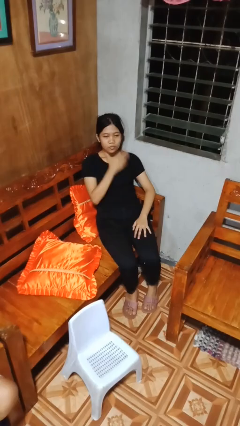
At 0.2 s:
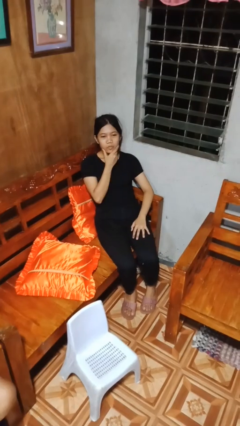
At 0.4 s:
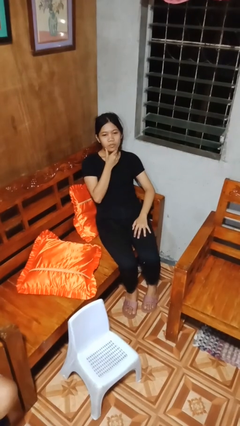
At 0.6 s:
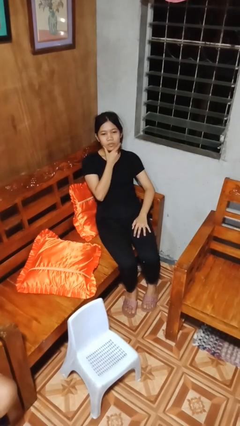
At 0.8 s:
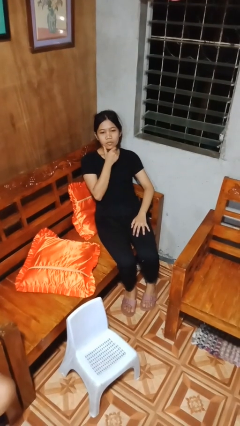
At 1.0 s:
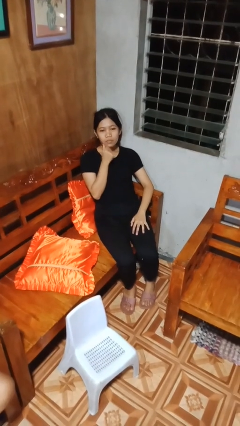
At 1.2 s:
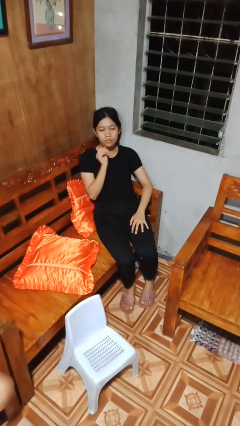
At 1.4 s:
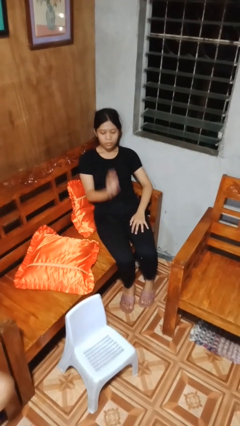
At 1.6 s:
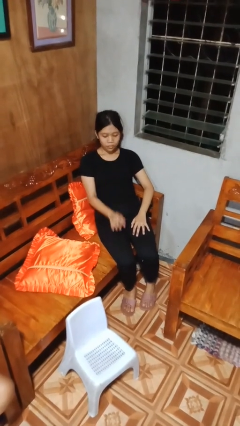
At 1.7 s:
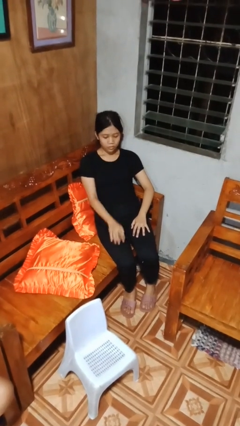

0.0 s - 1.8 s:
person strokes chin

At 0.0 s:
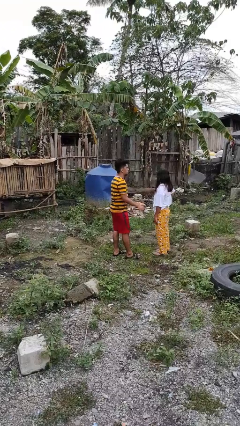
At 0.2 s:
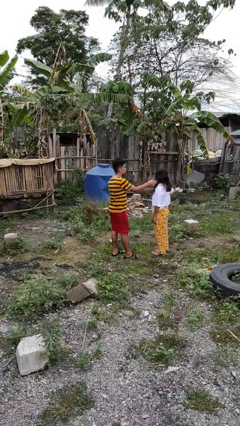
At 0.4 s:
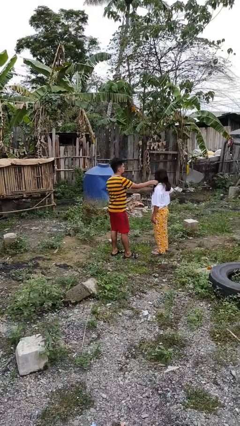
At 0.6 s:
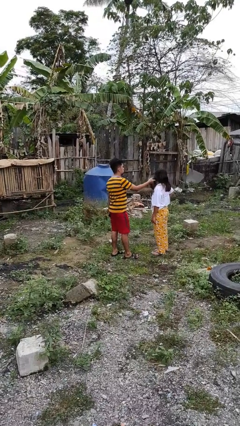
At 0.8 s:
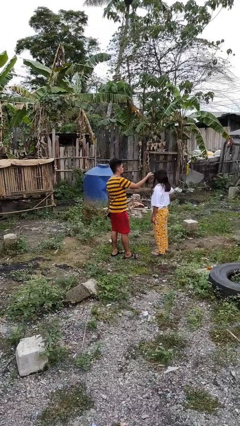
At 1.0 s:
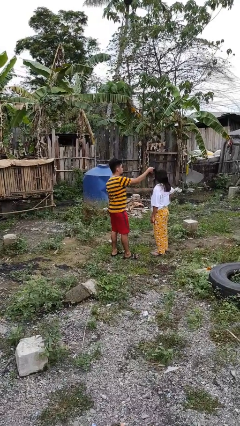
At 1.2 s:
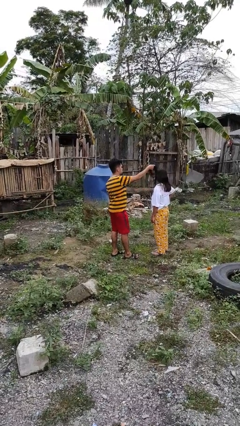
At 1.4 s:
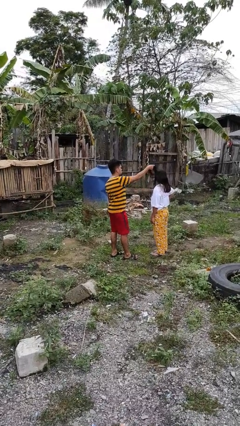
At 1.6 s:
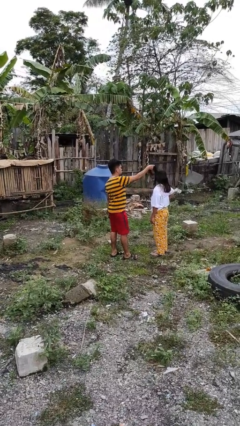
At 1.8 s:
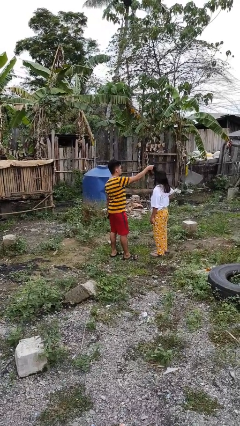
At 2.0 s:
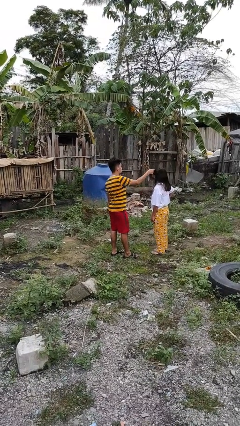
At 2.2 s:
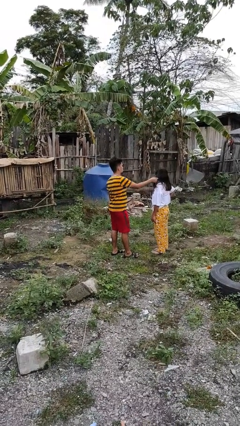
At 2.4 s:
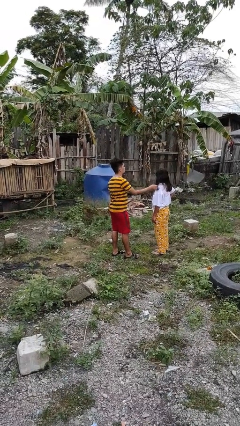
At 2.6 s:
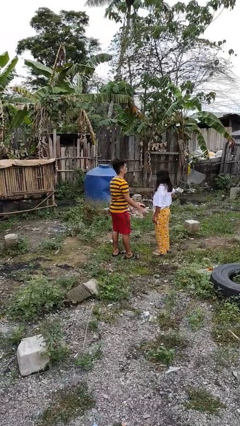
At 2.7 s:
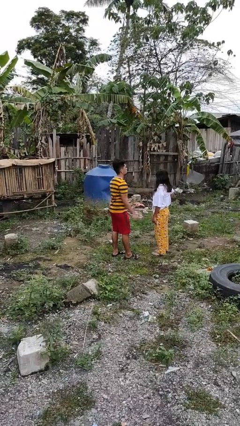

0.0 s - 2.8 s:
person grabs person by hair

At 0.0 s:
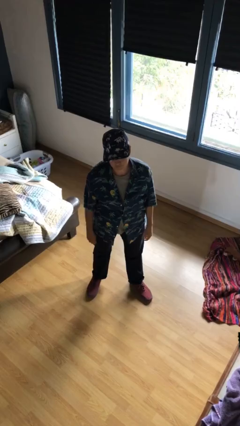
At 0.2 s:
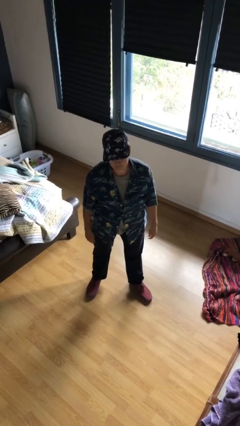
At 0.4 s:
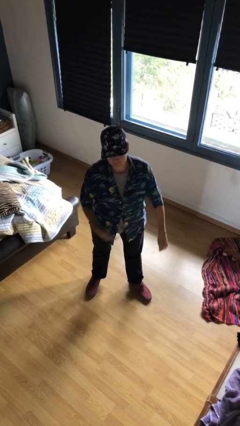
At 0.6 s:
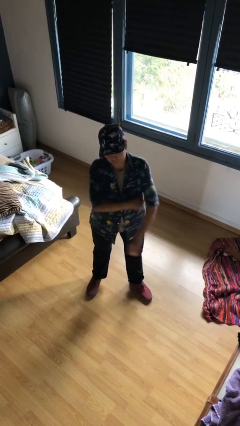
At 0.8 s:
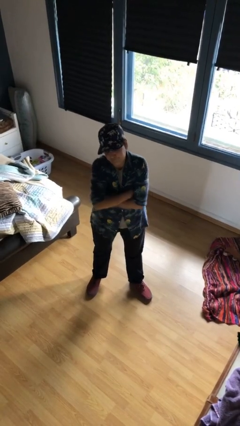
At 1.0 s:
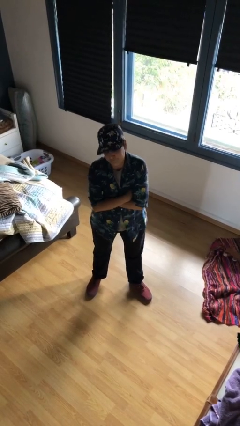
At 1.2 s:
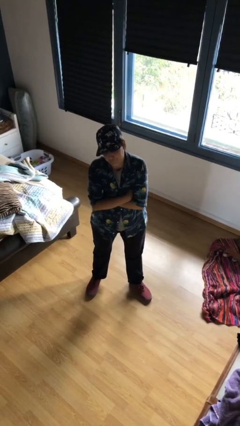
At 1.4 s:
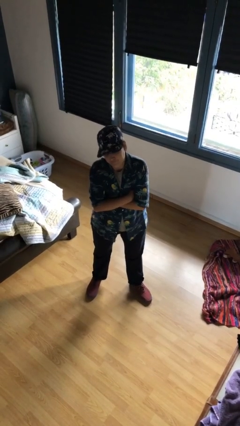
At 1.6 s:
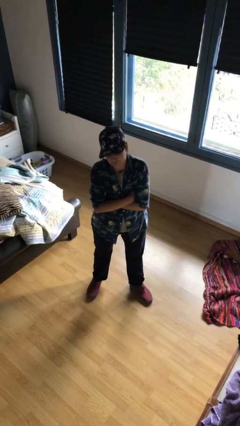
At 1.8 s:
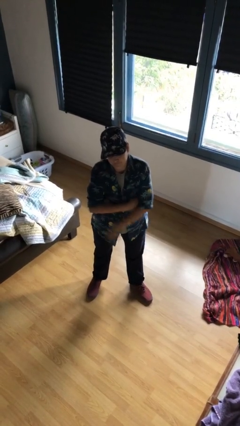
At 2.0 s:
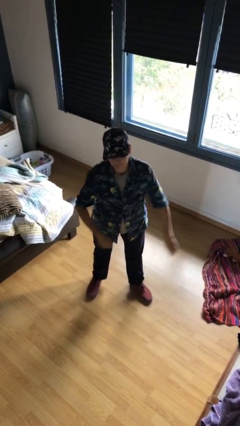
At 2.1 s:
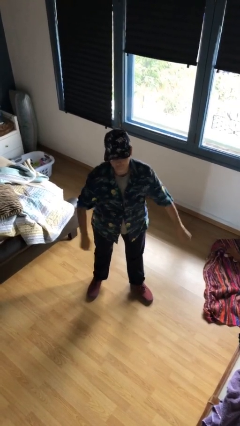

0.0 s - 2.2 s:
person crosses arms

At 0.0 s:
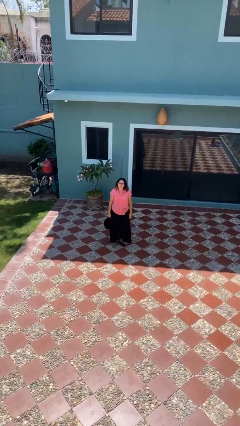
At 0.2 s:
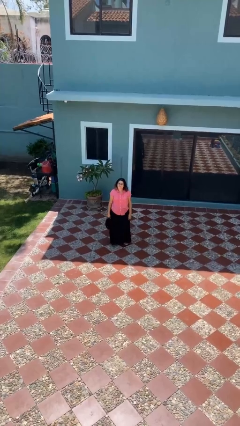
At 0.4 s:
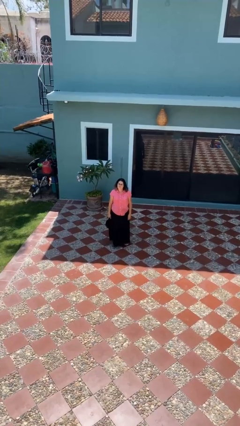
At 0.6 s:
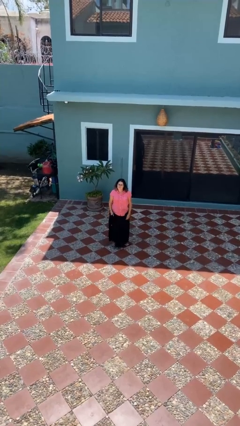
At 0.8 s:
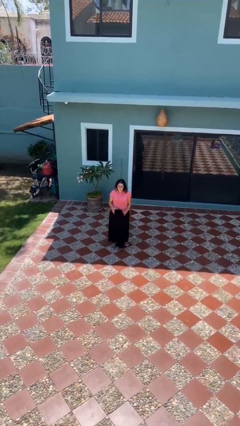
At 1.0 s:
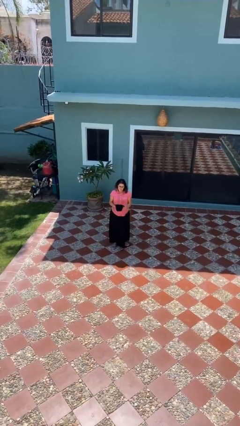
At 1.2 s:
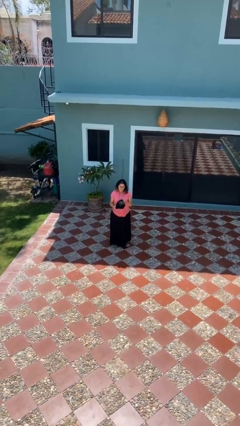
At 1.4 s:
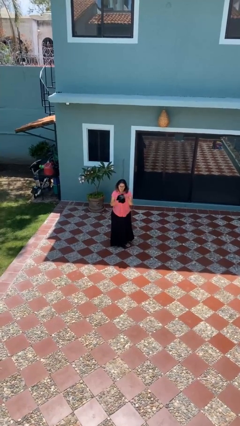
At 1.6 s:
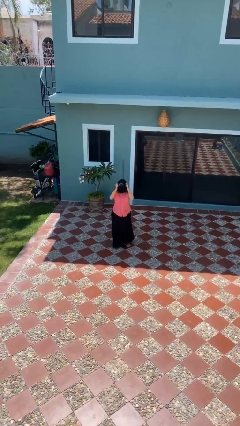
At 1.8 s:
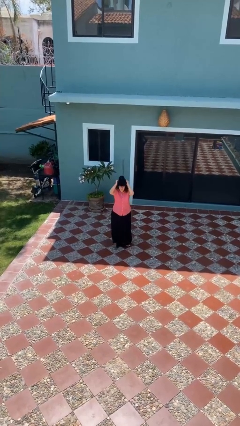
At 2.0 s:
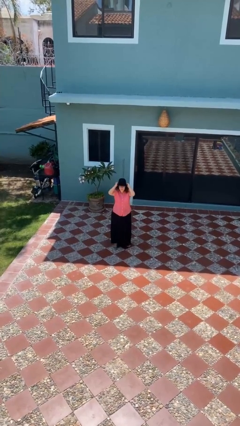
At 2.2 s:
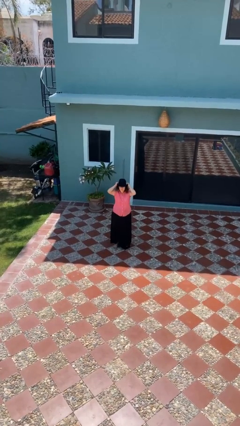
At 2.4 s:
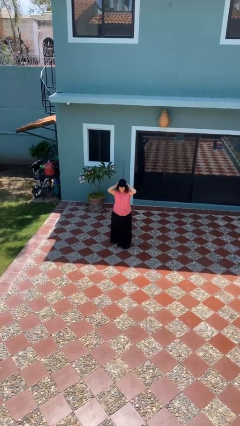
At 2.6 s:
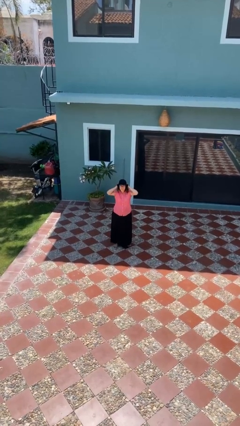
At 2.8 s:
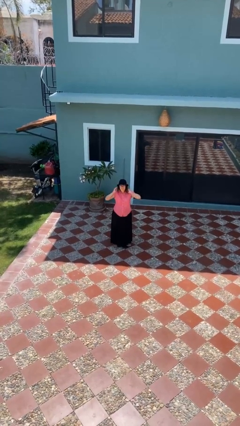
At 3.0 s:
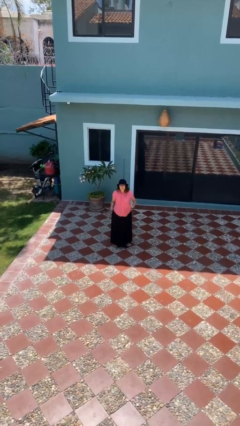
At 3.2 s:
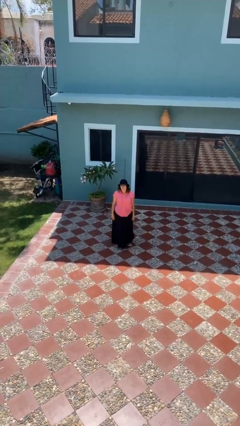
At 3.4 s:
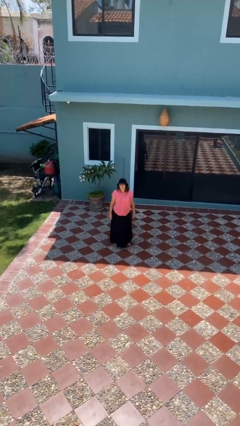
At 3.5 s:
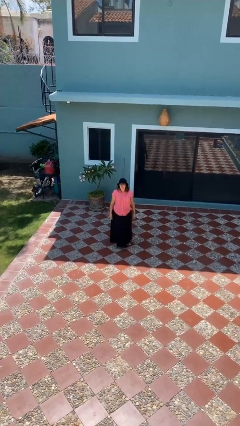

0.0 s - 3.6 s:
person puts on hat

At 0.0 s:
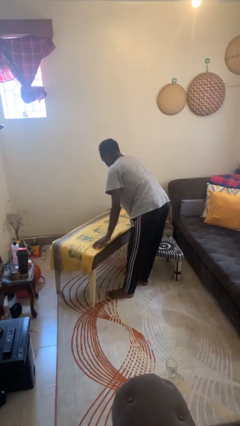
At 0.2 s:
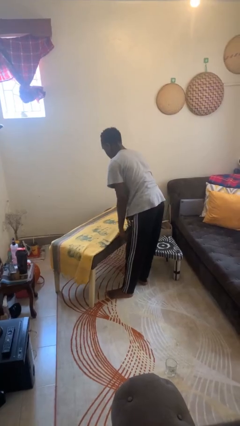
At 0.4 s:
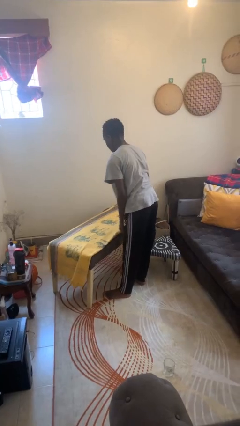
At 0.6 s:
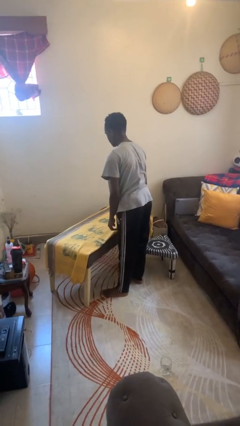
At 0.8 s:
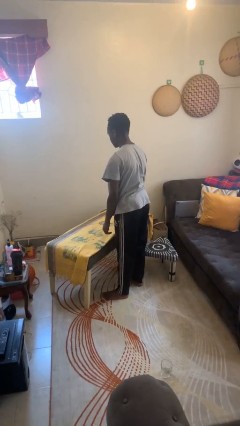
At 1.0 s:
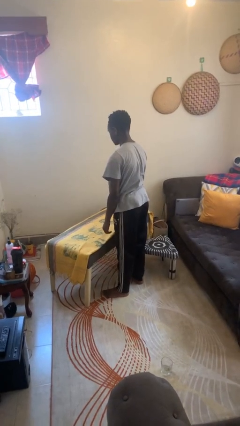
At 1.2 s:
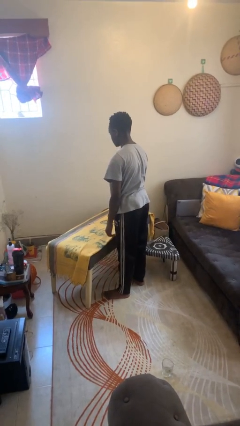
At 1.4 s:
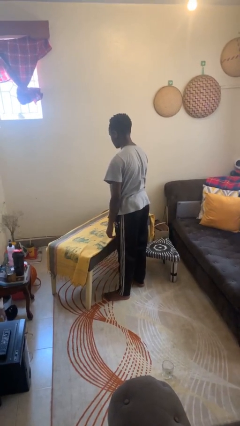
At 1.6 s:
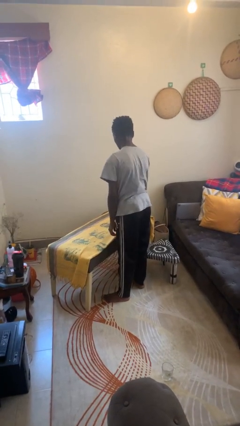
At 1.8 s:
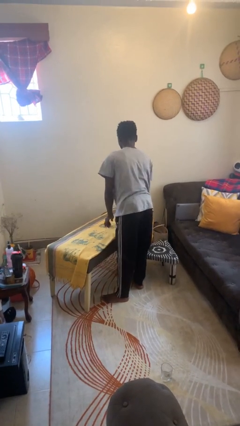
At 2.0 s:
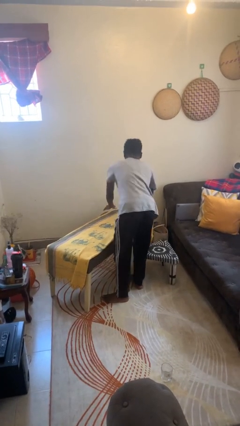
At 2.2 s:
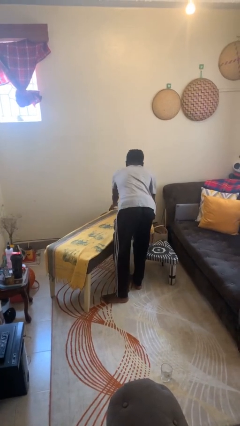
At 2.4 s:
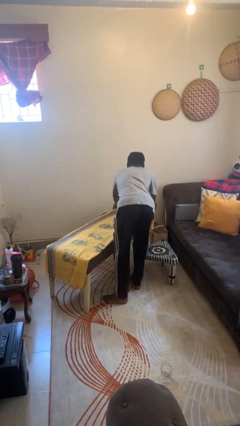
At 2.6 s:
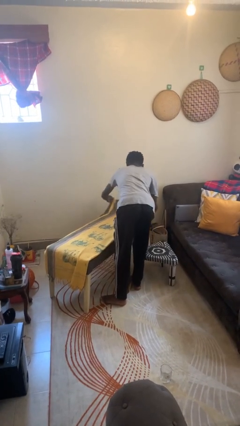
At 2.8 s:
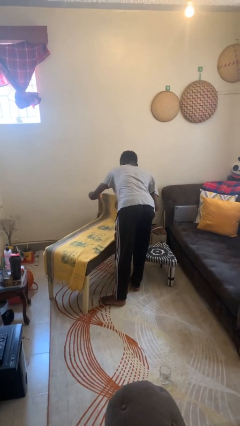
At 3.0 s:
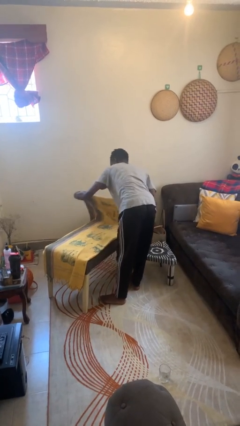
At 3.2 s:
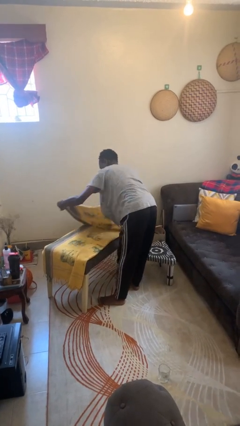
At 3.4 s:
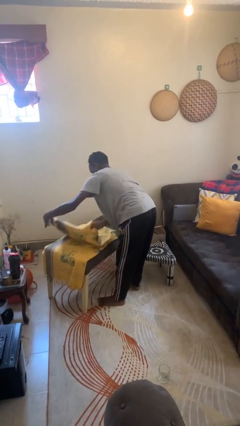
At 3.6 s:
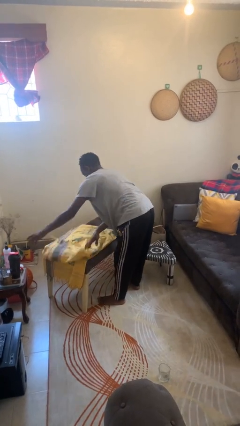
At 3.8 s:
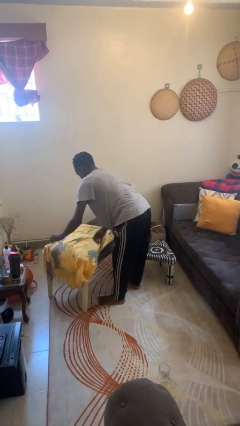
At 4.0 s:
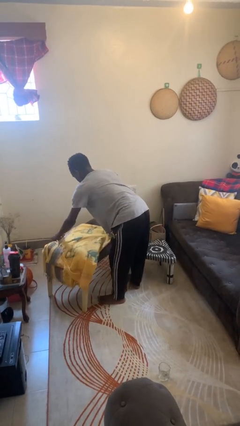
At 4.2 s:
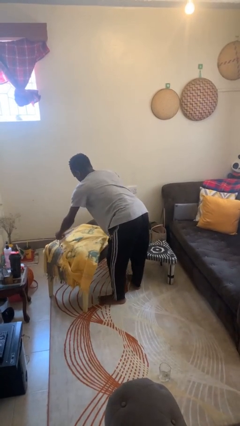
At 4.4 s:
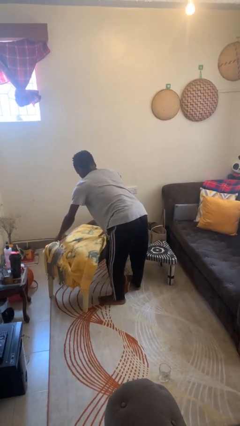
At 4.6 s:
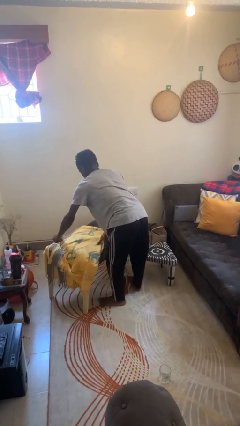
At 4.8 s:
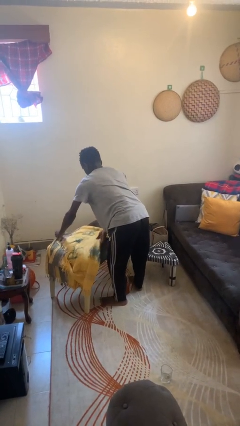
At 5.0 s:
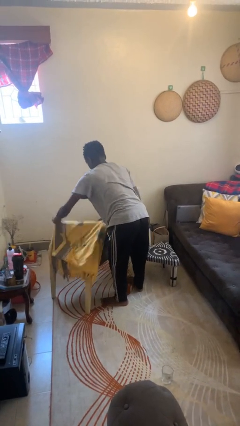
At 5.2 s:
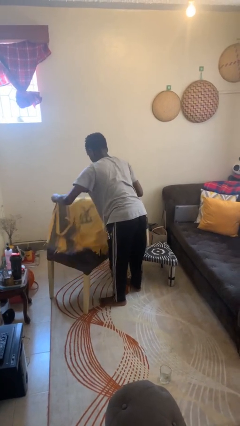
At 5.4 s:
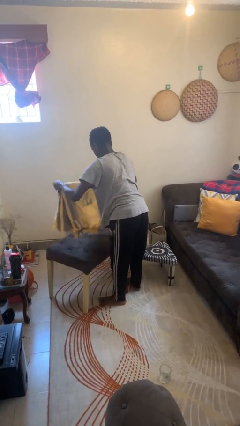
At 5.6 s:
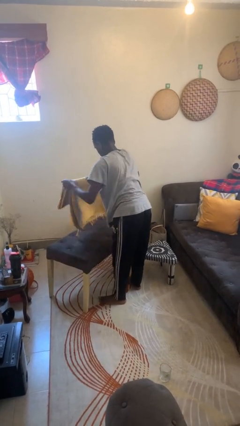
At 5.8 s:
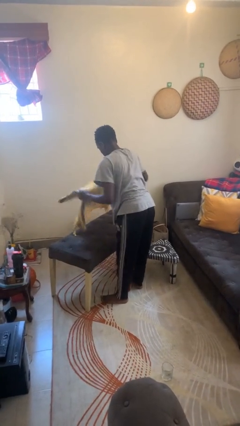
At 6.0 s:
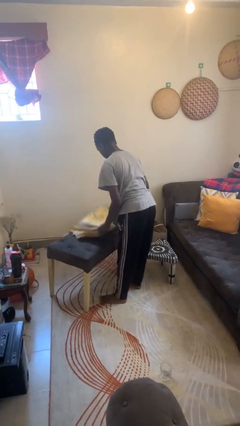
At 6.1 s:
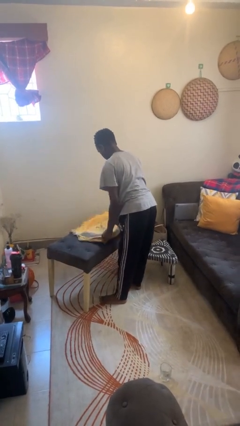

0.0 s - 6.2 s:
person folds tablecloth

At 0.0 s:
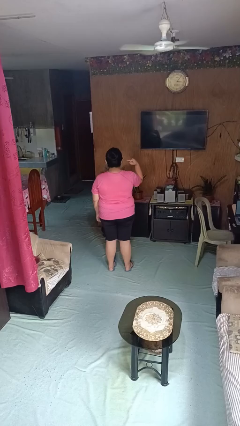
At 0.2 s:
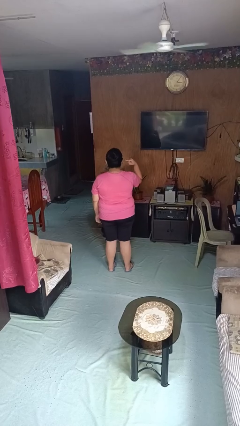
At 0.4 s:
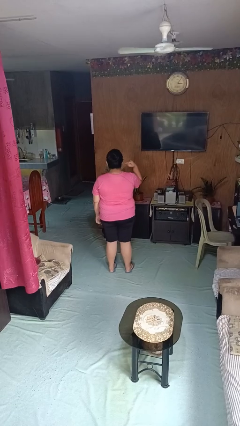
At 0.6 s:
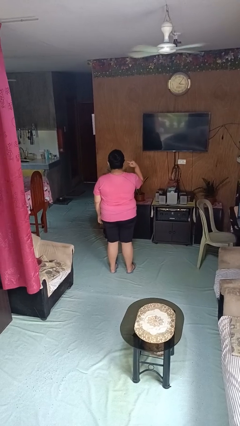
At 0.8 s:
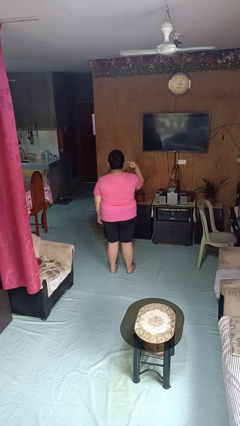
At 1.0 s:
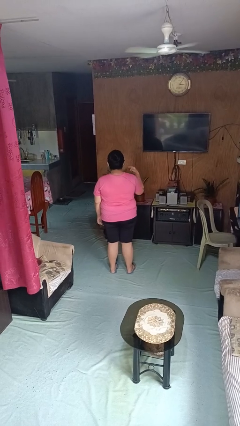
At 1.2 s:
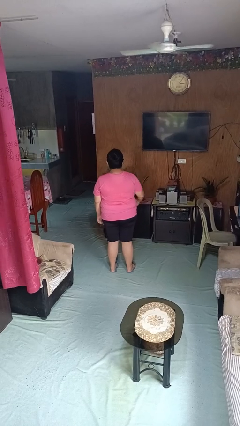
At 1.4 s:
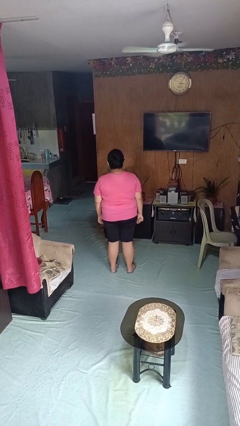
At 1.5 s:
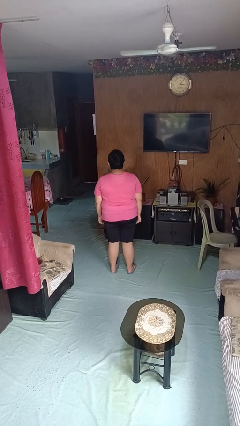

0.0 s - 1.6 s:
person gestures listen closely
